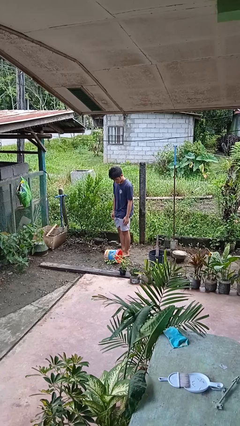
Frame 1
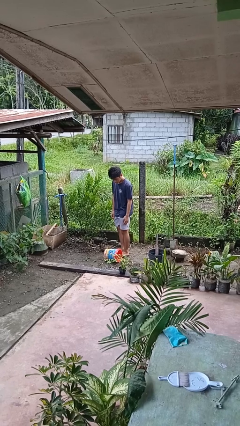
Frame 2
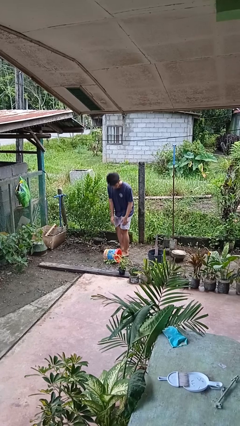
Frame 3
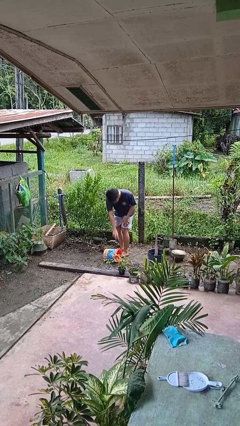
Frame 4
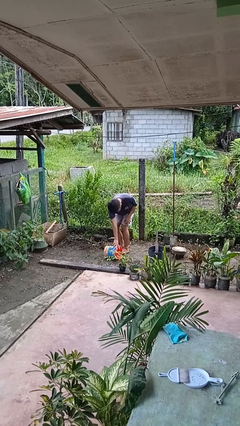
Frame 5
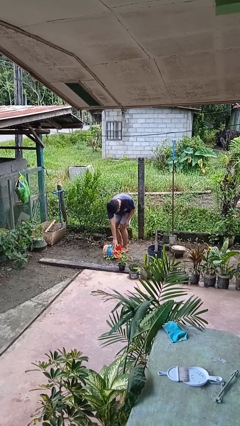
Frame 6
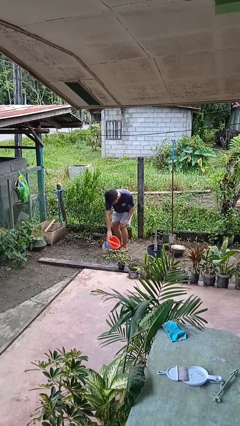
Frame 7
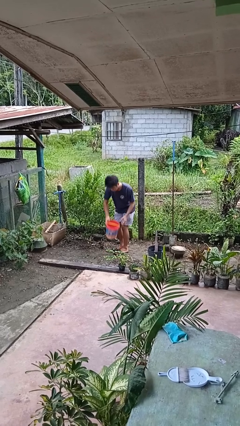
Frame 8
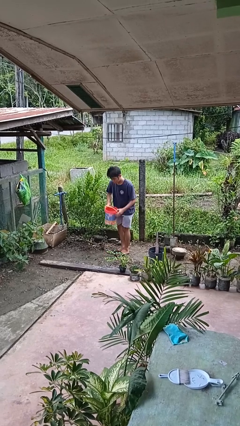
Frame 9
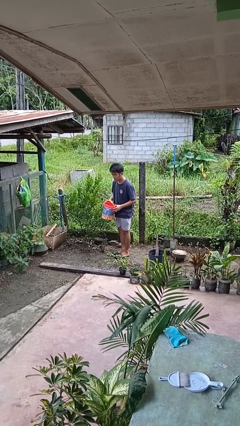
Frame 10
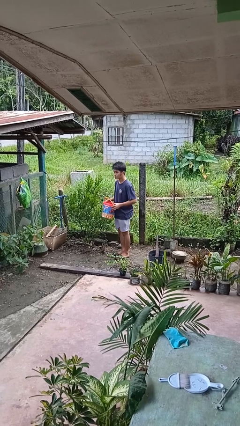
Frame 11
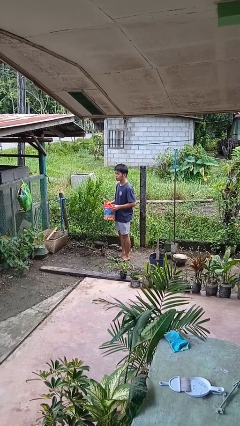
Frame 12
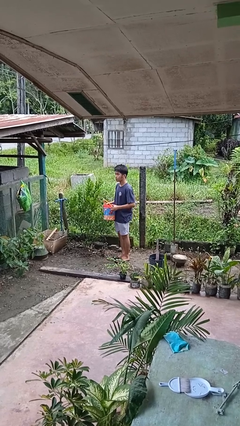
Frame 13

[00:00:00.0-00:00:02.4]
person picks up object from floor

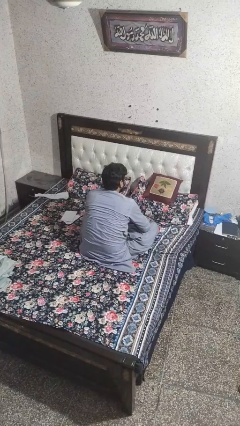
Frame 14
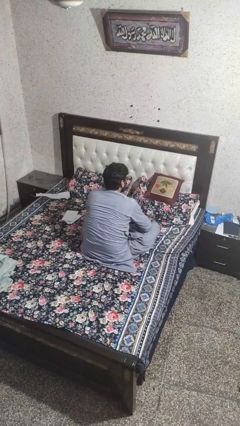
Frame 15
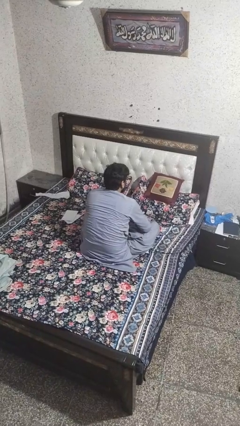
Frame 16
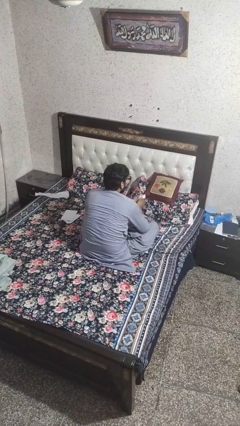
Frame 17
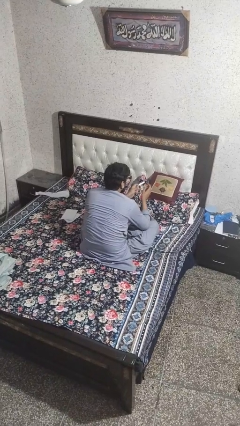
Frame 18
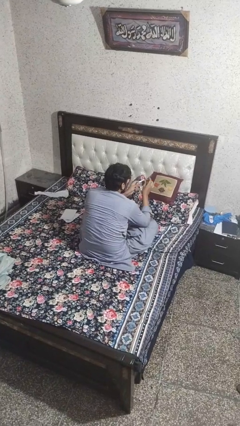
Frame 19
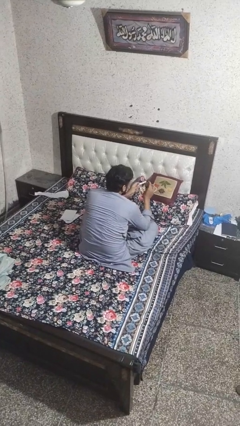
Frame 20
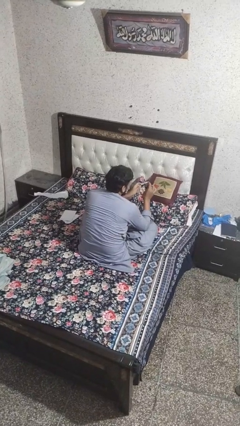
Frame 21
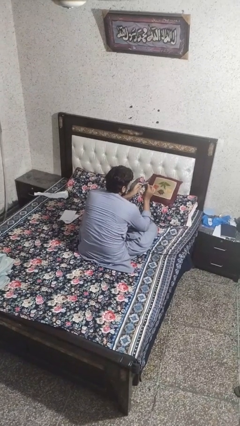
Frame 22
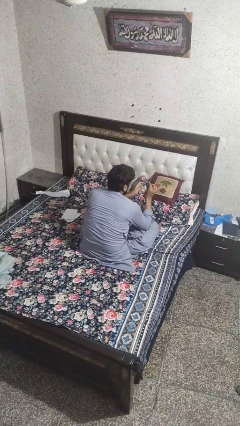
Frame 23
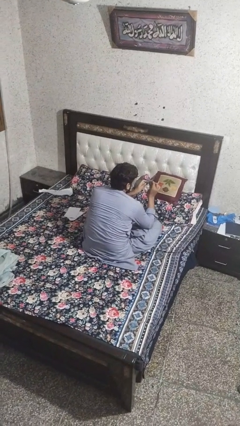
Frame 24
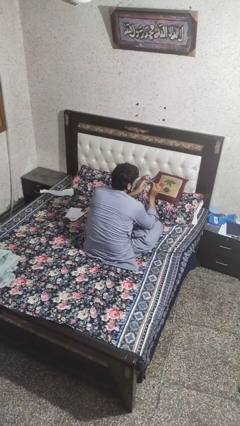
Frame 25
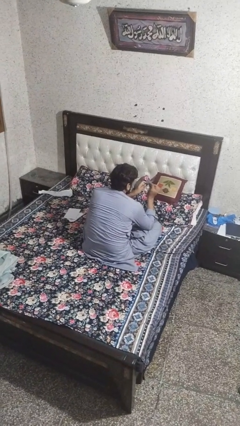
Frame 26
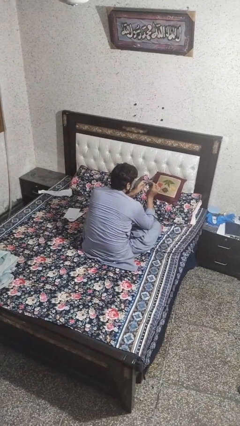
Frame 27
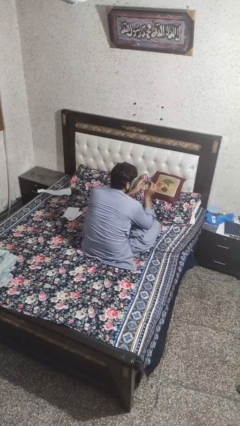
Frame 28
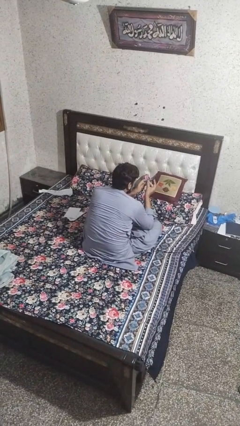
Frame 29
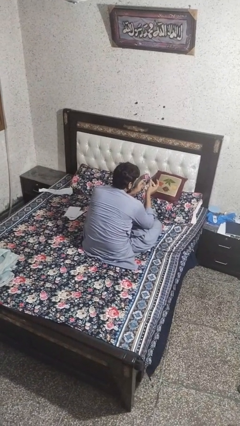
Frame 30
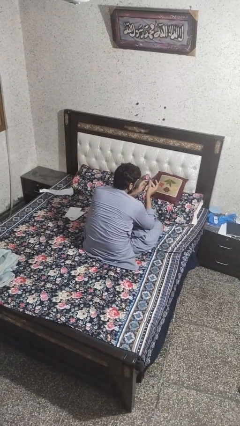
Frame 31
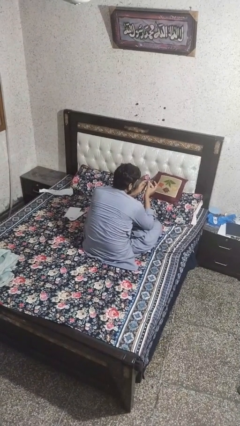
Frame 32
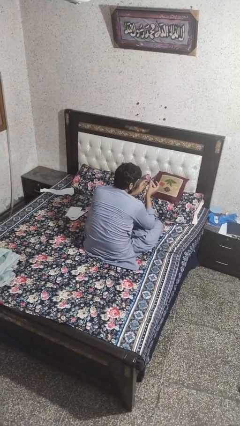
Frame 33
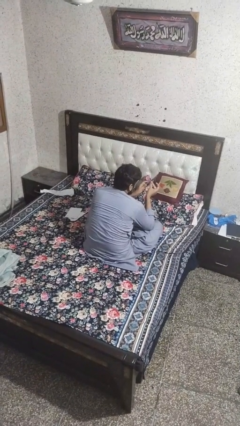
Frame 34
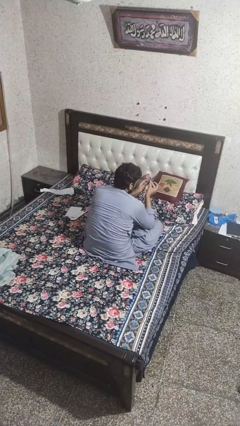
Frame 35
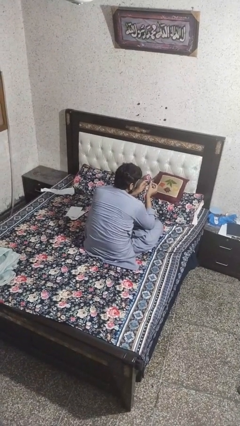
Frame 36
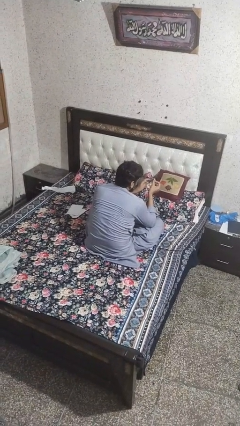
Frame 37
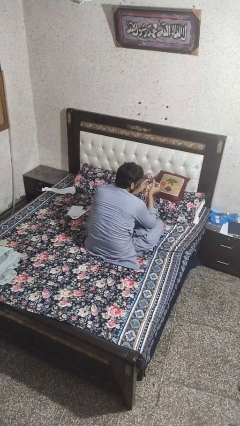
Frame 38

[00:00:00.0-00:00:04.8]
person files fingernails

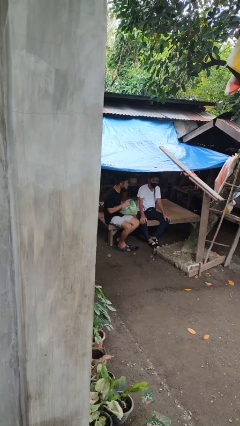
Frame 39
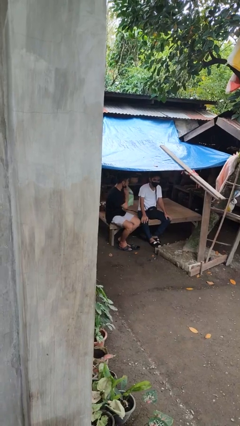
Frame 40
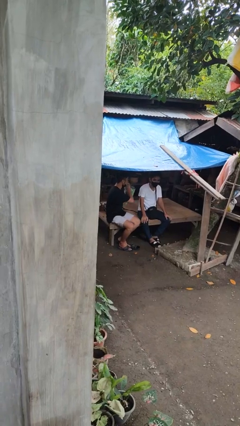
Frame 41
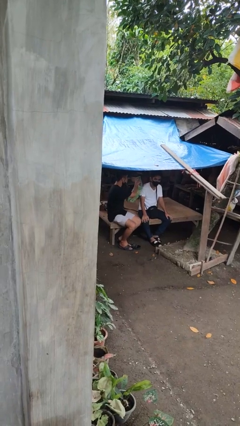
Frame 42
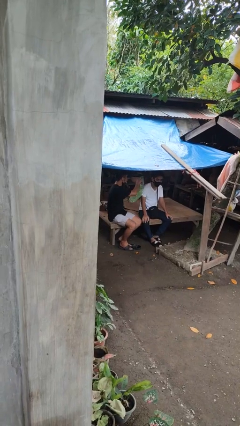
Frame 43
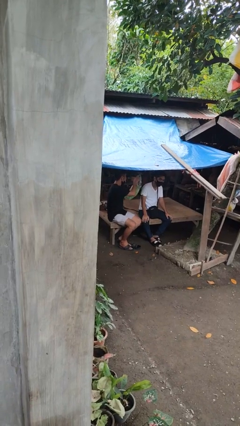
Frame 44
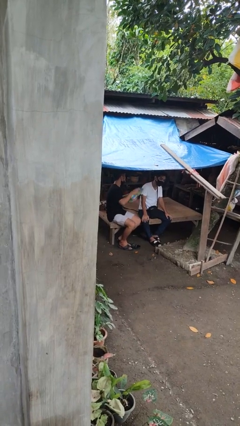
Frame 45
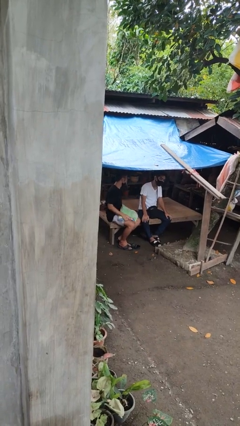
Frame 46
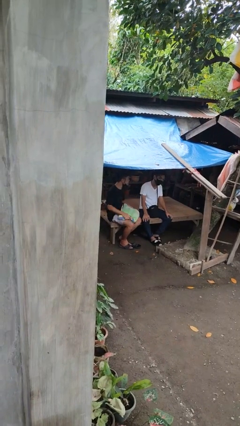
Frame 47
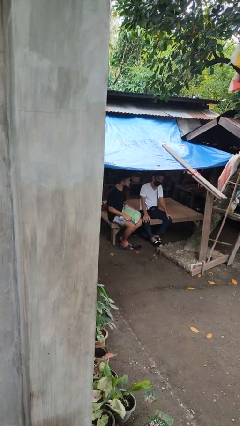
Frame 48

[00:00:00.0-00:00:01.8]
person hits person with pillow

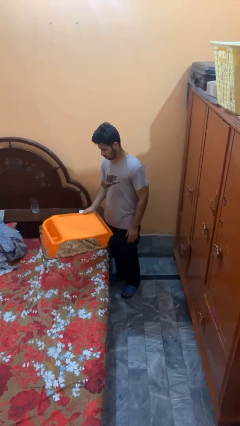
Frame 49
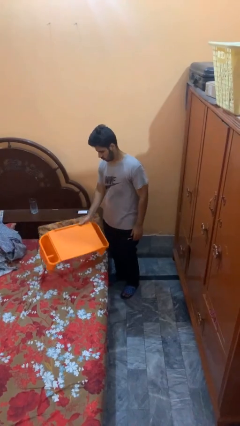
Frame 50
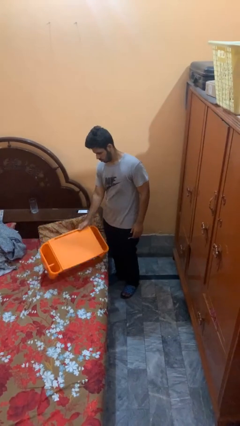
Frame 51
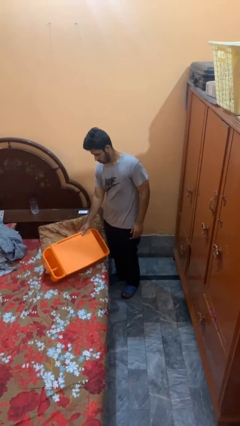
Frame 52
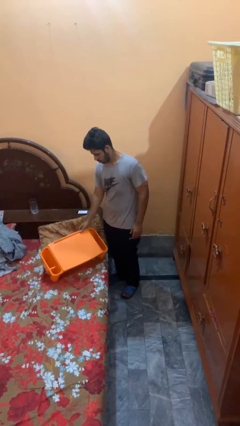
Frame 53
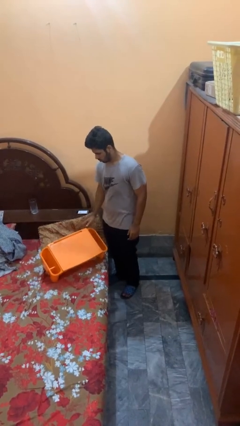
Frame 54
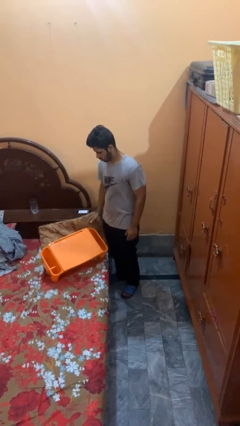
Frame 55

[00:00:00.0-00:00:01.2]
person puts down object on bed

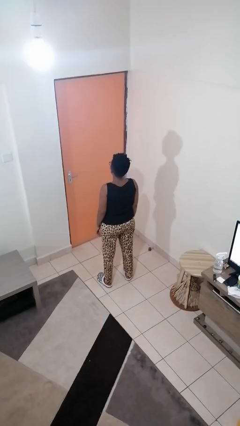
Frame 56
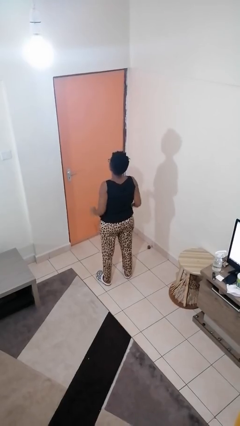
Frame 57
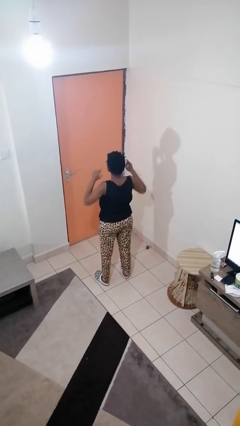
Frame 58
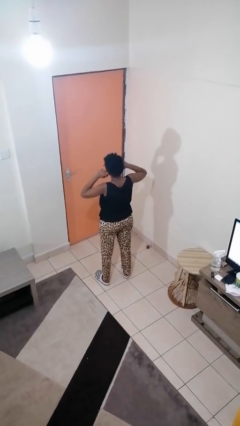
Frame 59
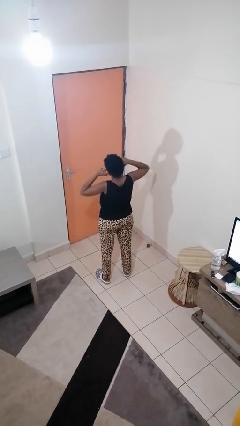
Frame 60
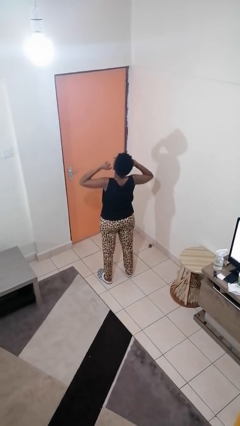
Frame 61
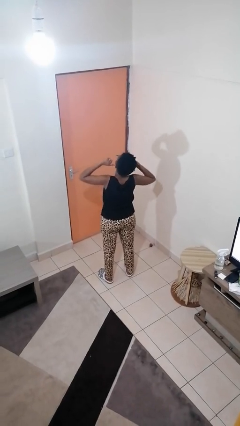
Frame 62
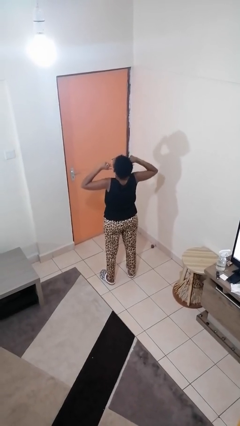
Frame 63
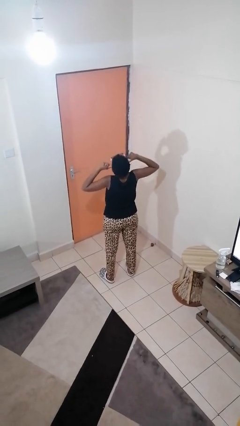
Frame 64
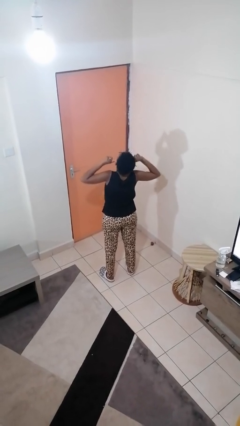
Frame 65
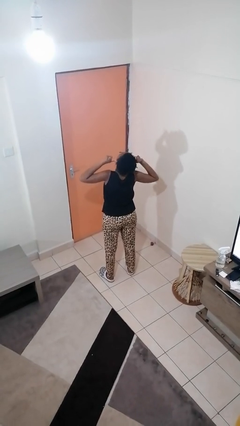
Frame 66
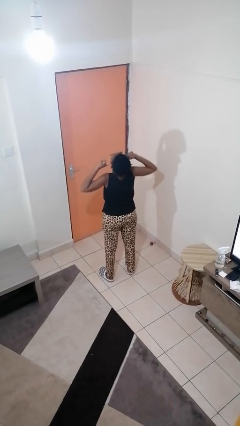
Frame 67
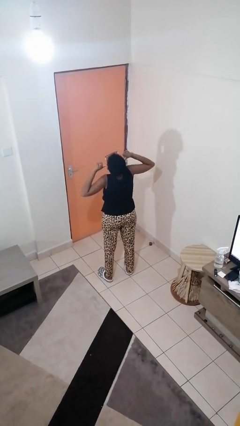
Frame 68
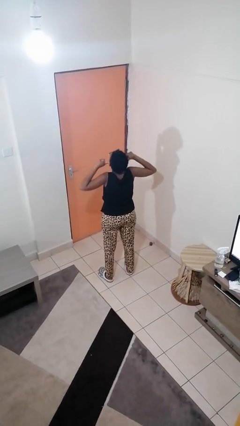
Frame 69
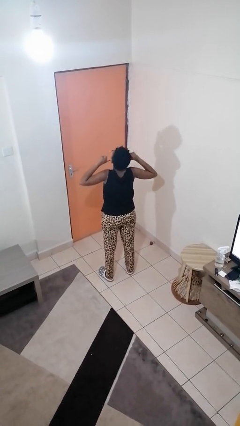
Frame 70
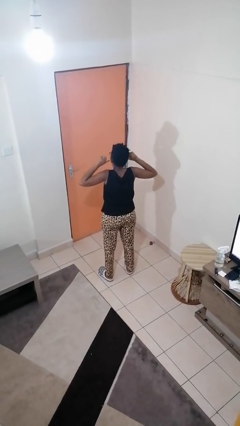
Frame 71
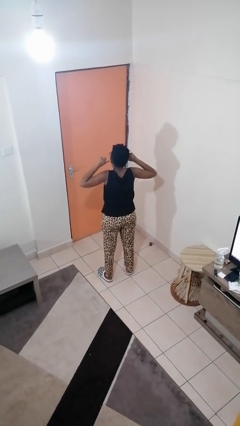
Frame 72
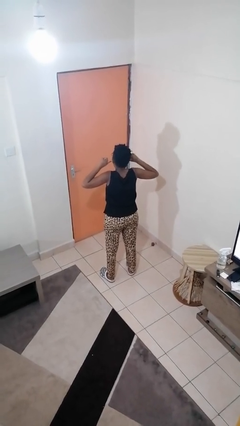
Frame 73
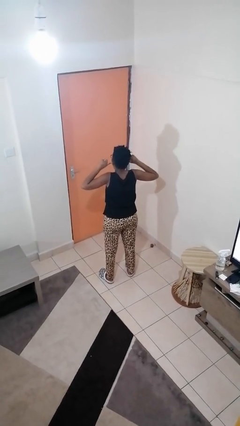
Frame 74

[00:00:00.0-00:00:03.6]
person puts fingers in ear

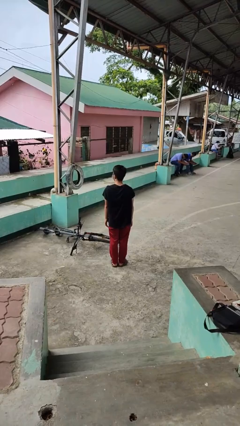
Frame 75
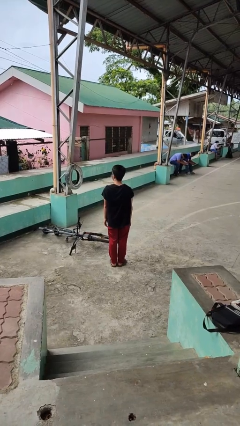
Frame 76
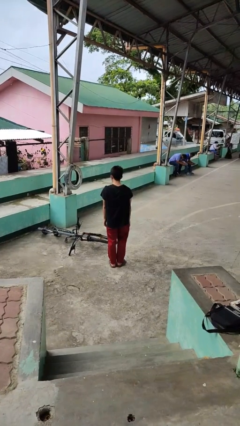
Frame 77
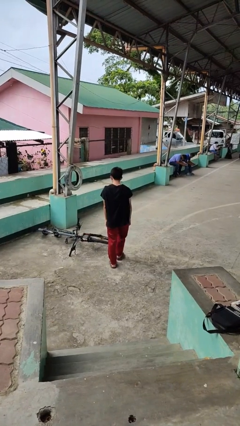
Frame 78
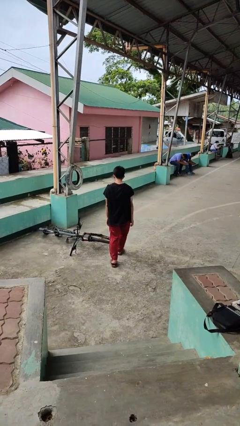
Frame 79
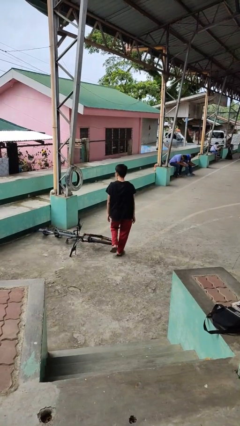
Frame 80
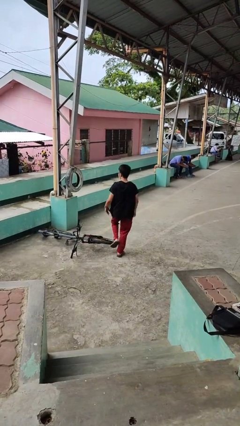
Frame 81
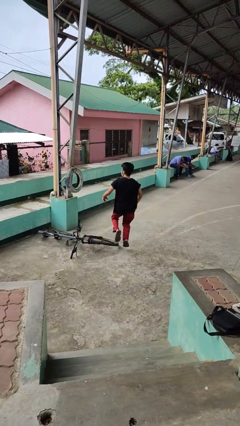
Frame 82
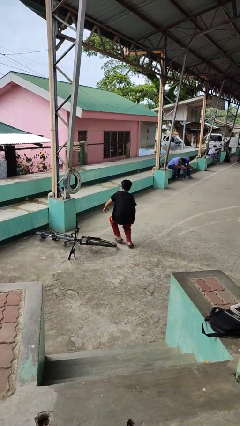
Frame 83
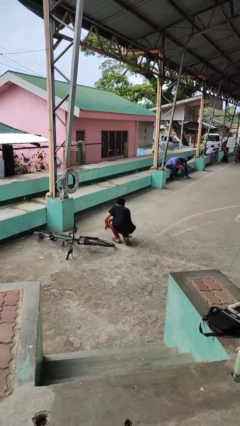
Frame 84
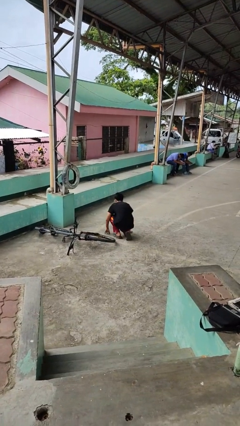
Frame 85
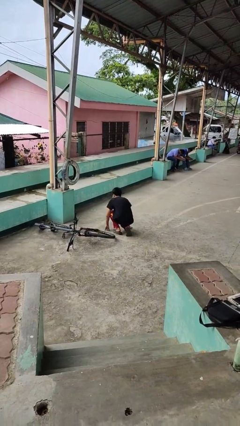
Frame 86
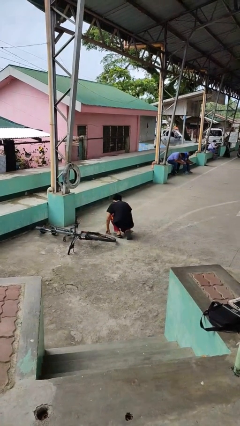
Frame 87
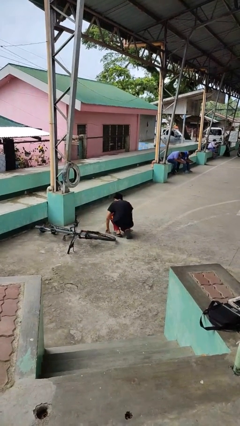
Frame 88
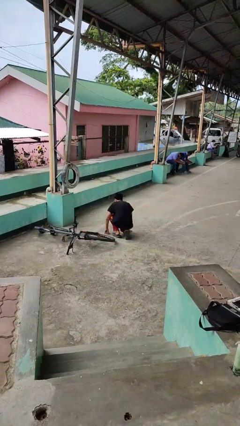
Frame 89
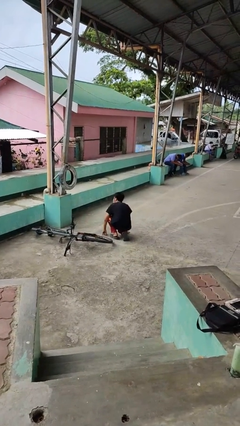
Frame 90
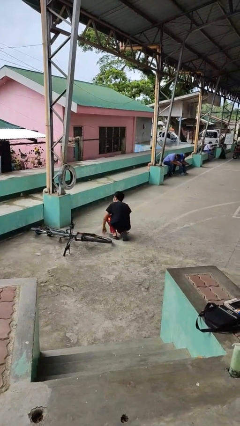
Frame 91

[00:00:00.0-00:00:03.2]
person trips on object on floor

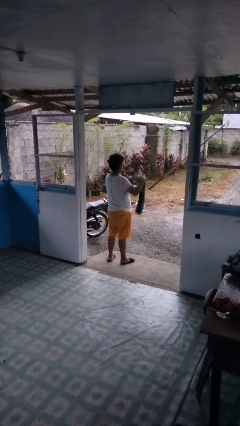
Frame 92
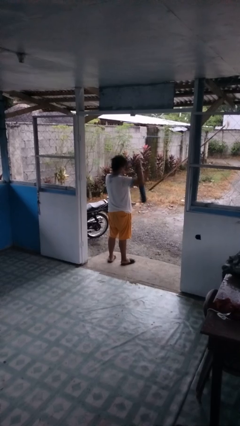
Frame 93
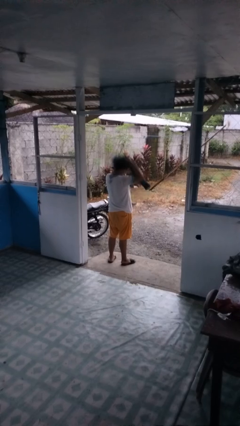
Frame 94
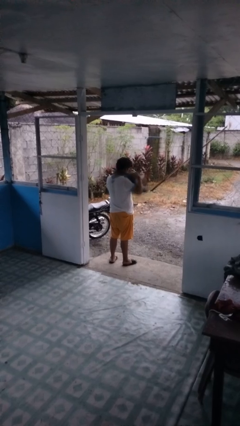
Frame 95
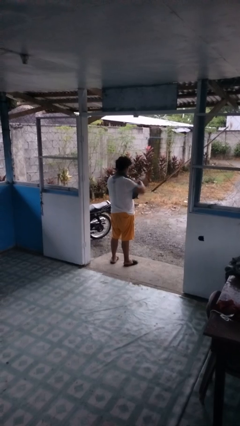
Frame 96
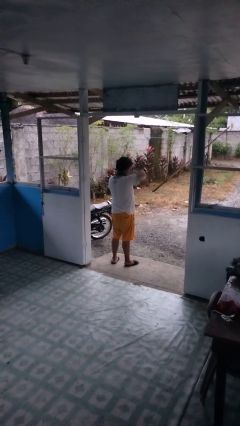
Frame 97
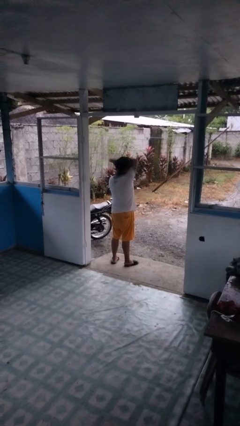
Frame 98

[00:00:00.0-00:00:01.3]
person puts on scarf
